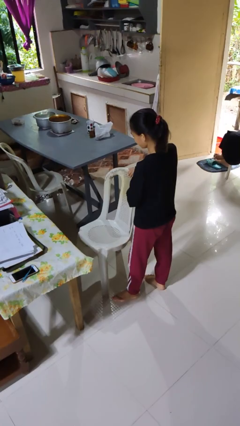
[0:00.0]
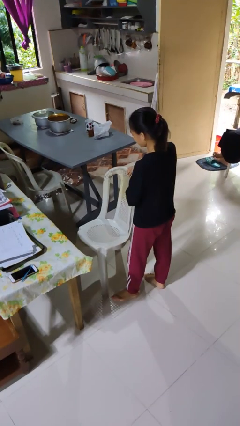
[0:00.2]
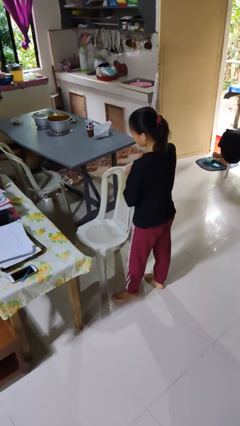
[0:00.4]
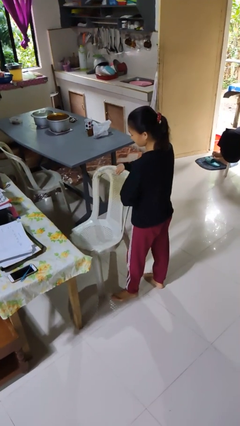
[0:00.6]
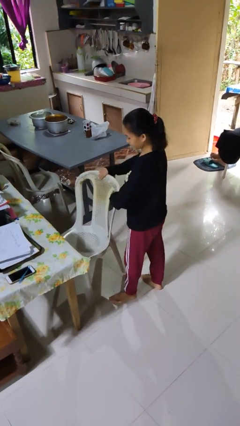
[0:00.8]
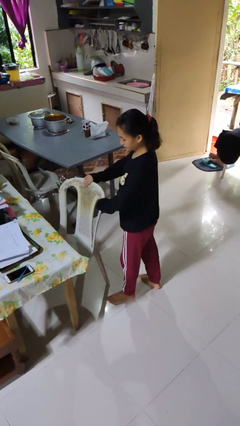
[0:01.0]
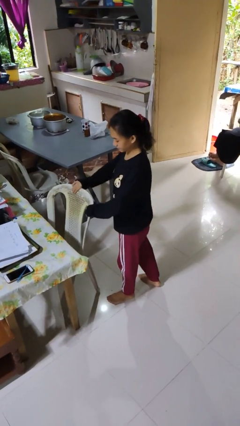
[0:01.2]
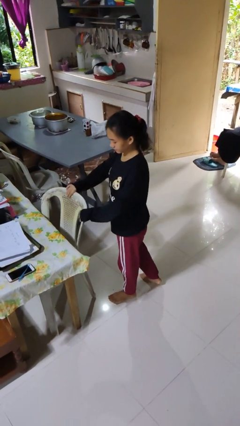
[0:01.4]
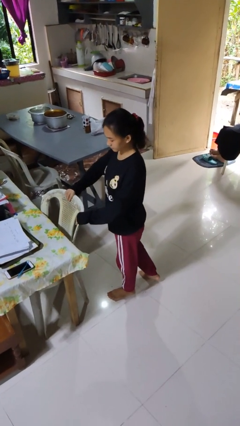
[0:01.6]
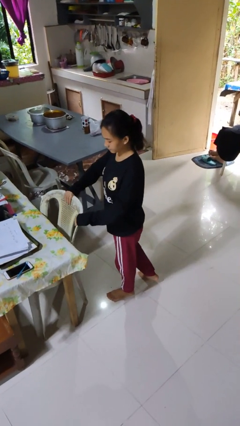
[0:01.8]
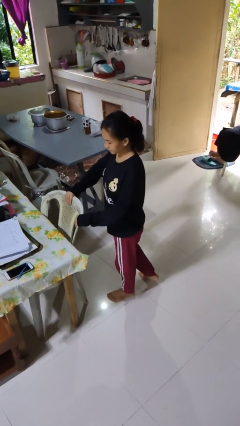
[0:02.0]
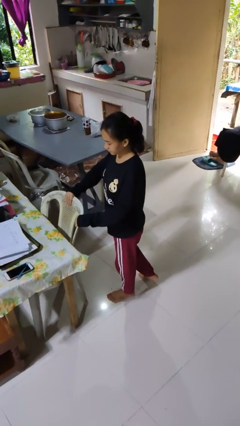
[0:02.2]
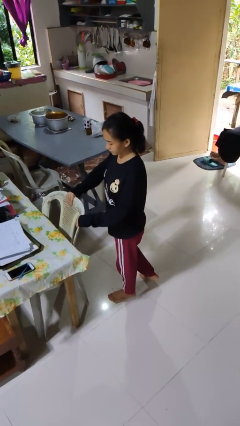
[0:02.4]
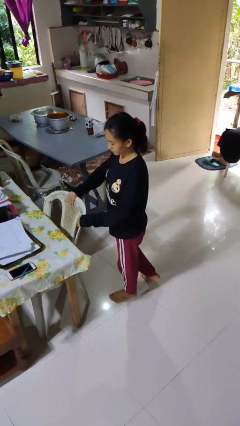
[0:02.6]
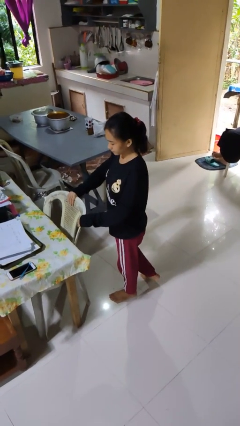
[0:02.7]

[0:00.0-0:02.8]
person pushes in chair

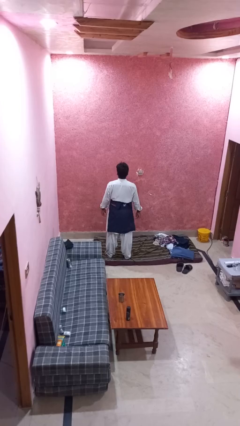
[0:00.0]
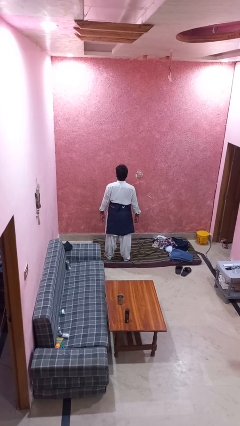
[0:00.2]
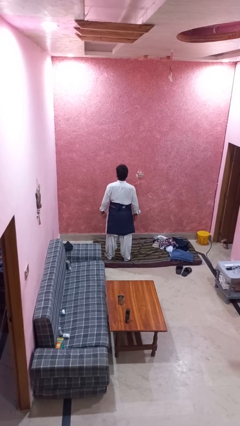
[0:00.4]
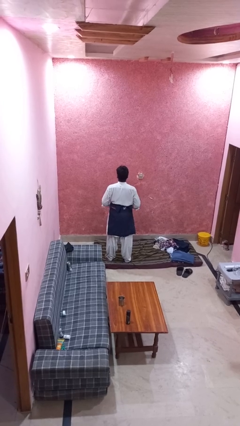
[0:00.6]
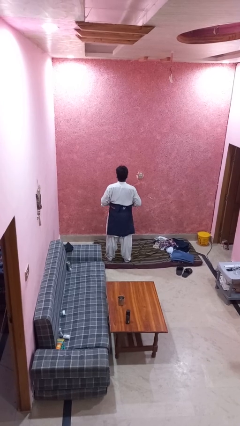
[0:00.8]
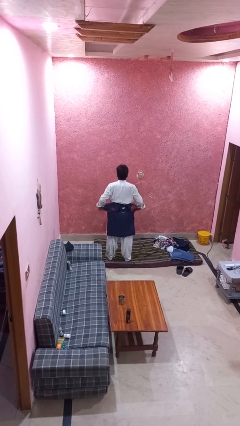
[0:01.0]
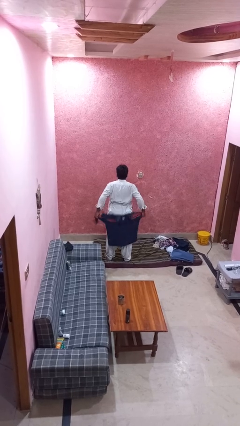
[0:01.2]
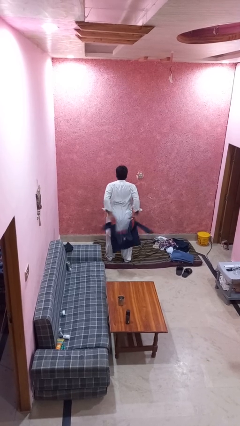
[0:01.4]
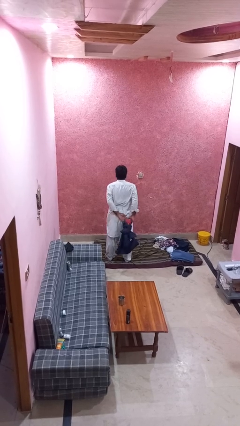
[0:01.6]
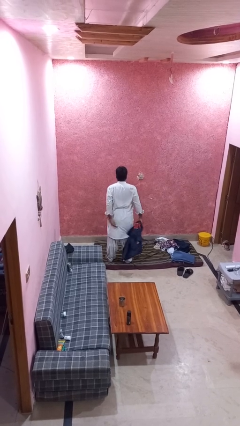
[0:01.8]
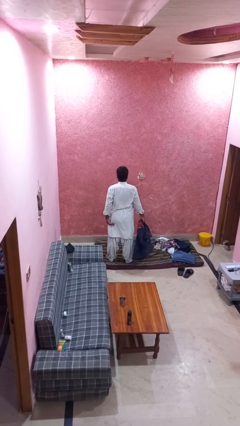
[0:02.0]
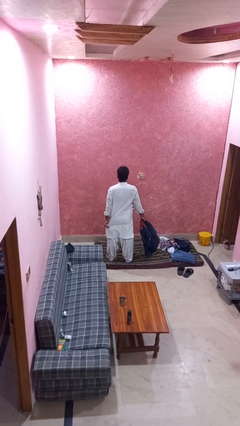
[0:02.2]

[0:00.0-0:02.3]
person unties jacket around waist

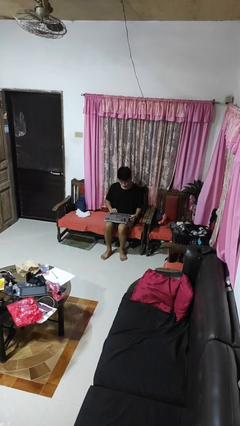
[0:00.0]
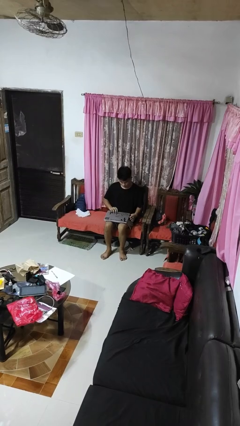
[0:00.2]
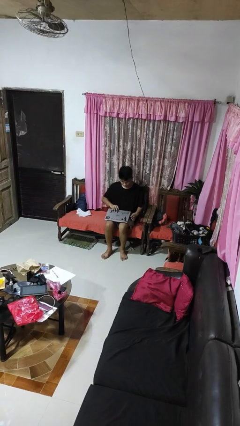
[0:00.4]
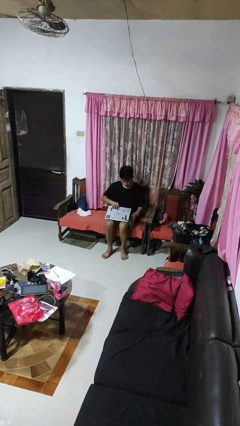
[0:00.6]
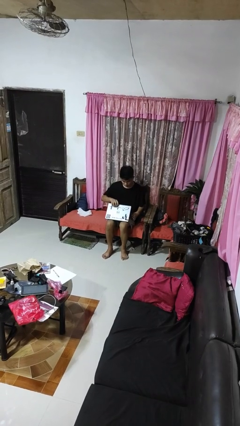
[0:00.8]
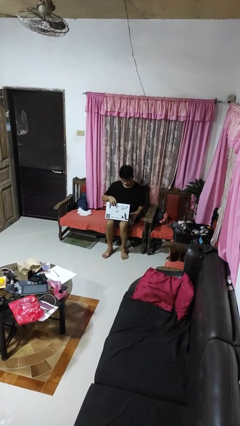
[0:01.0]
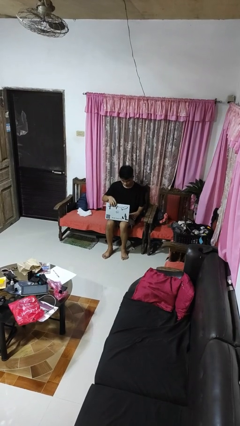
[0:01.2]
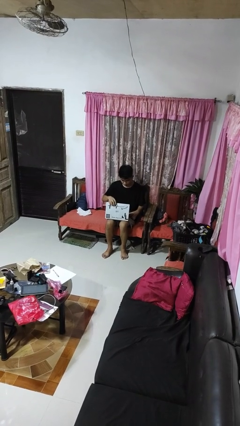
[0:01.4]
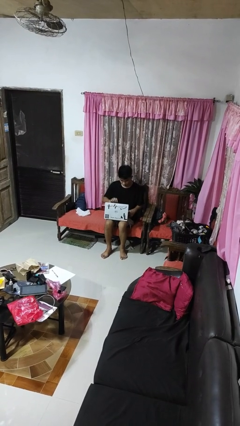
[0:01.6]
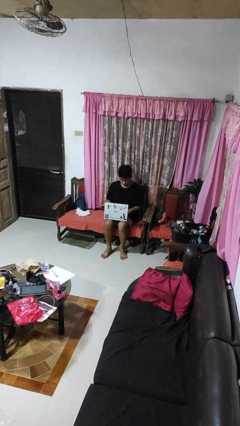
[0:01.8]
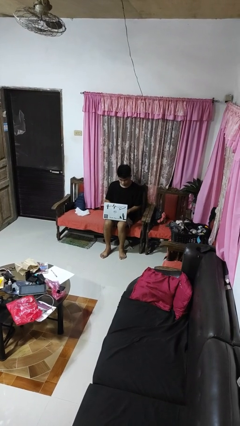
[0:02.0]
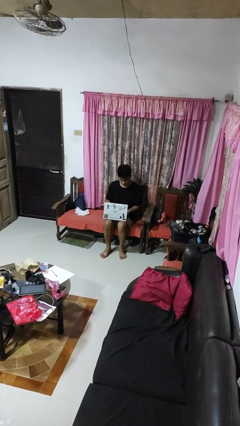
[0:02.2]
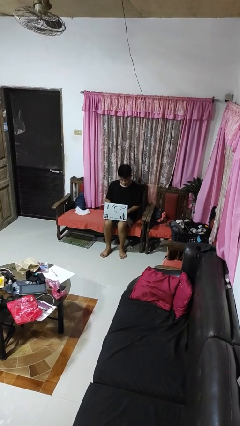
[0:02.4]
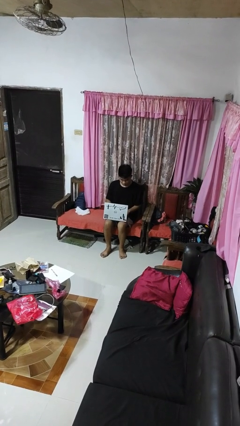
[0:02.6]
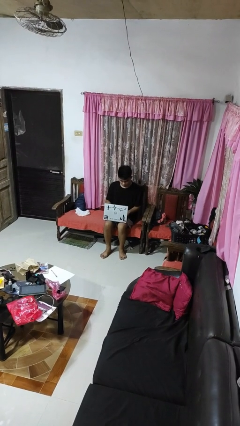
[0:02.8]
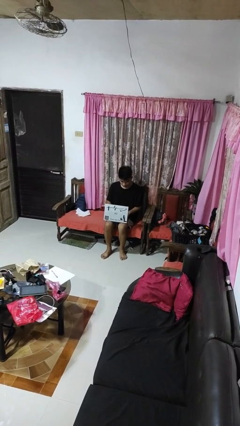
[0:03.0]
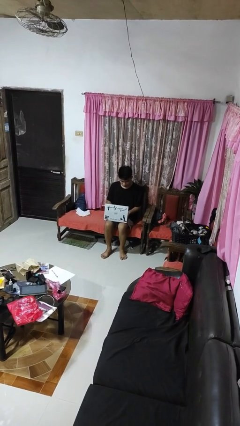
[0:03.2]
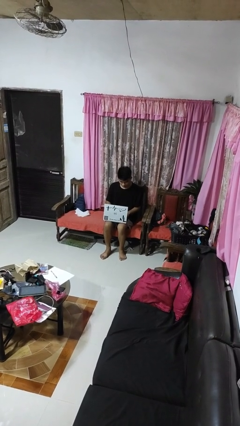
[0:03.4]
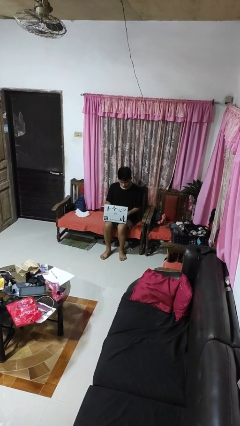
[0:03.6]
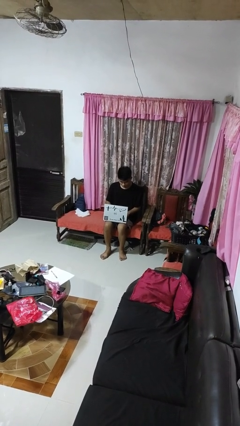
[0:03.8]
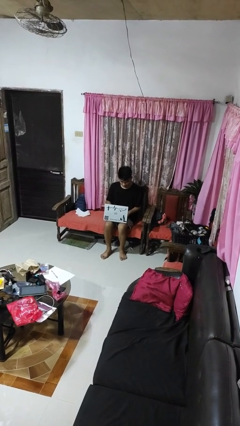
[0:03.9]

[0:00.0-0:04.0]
person opens laptop

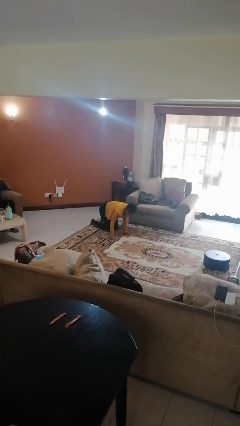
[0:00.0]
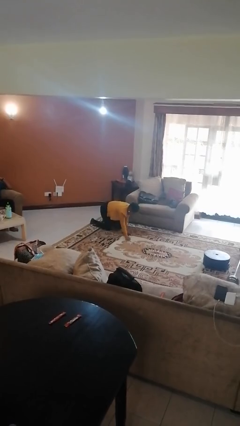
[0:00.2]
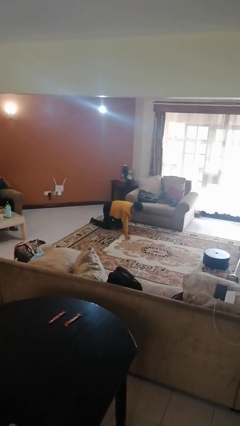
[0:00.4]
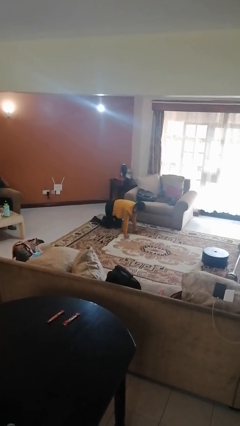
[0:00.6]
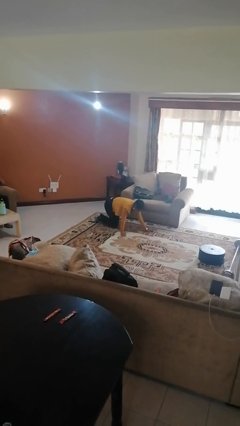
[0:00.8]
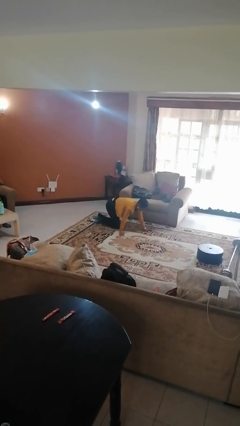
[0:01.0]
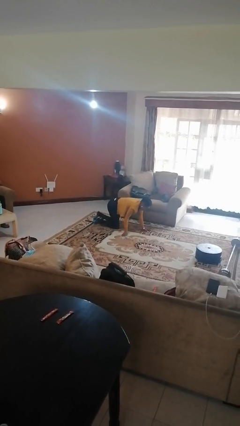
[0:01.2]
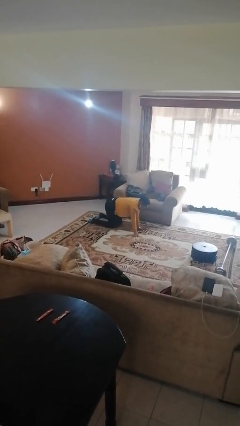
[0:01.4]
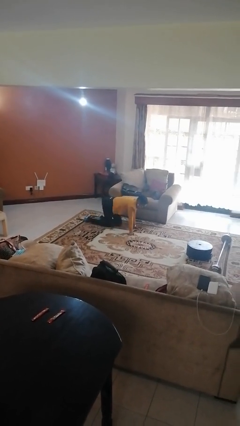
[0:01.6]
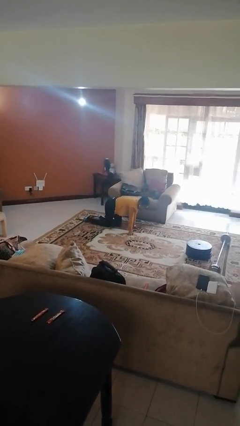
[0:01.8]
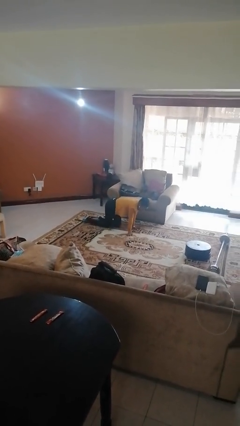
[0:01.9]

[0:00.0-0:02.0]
person crawls

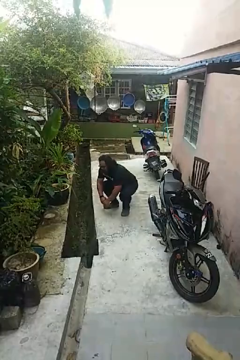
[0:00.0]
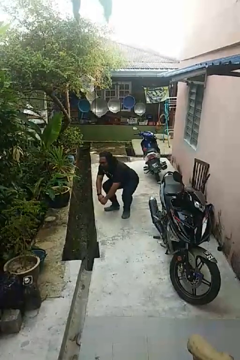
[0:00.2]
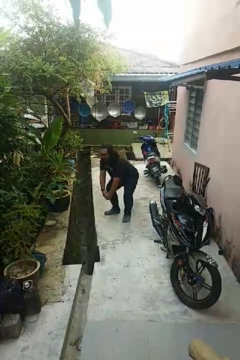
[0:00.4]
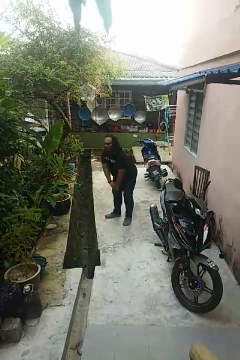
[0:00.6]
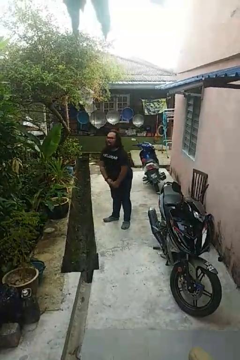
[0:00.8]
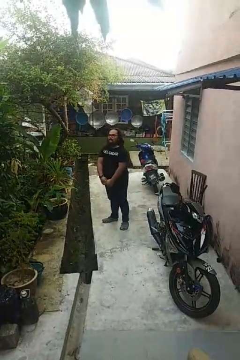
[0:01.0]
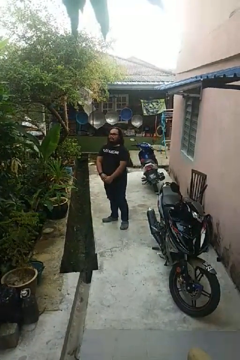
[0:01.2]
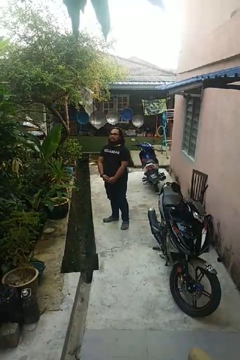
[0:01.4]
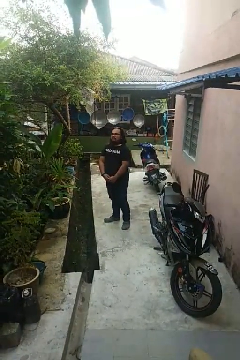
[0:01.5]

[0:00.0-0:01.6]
person stands up

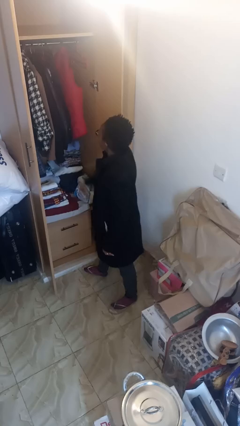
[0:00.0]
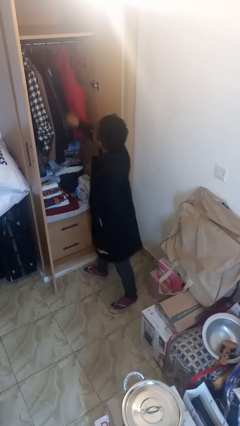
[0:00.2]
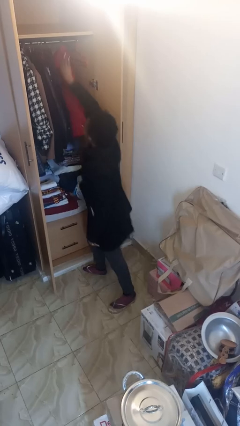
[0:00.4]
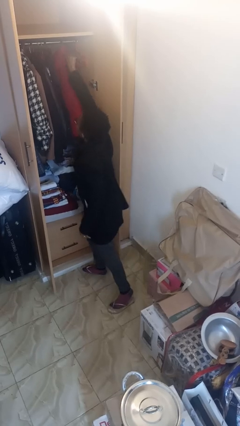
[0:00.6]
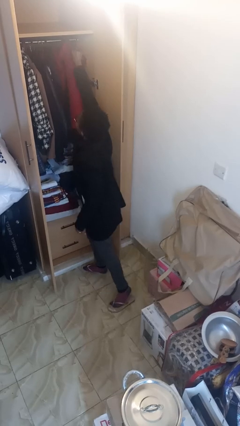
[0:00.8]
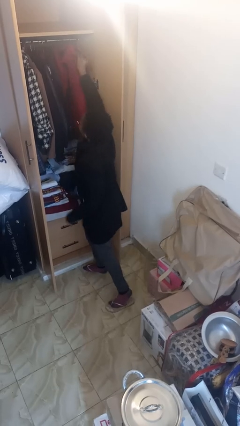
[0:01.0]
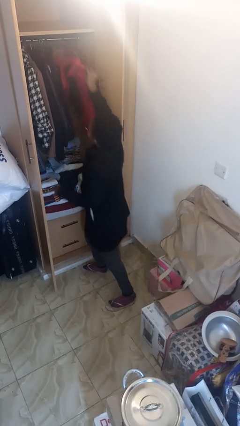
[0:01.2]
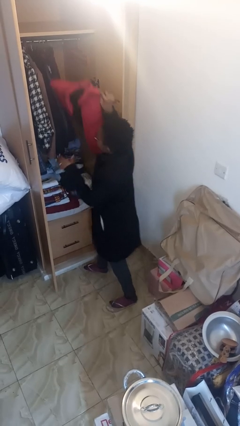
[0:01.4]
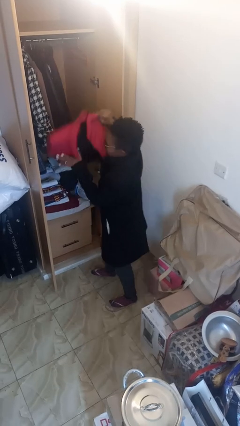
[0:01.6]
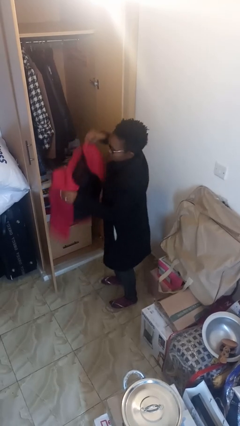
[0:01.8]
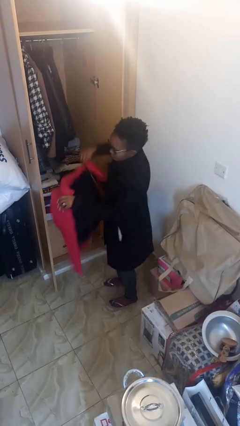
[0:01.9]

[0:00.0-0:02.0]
person takes clothes from closet

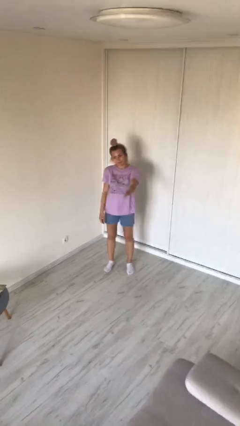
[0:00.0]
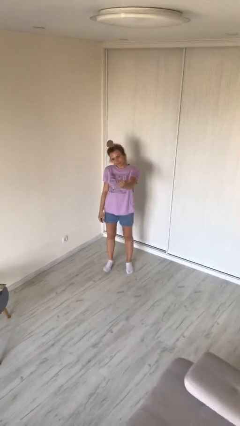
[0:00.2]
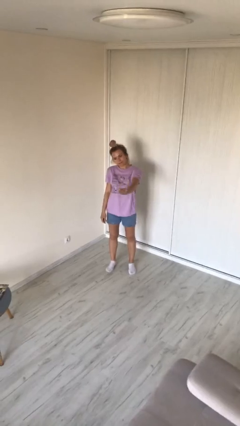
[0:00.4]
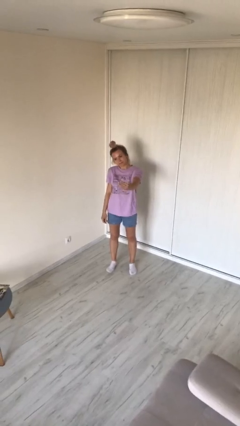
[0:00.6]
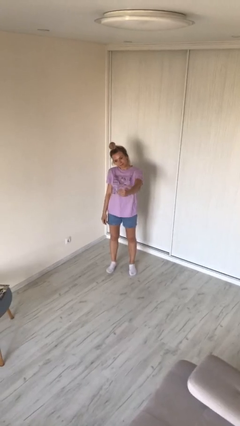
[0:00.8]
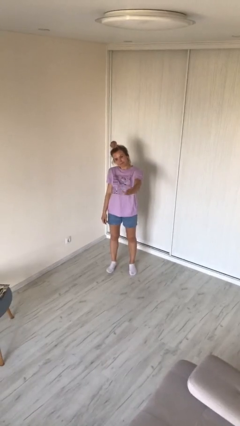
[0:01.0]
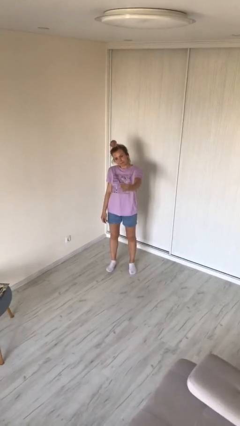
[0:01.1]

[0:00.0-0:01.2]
person gestures come here

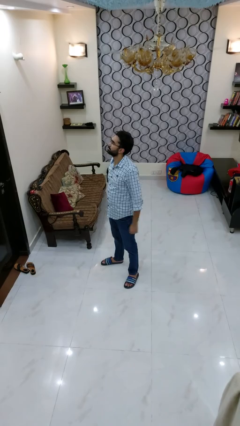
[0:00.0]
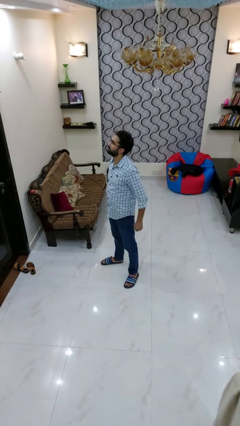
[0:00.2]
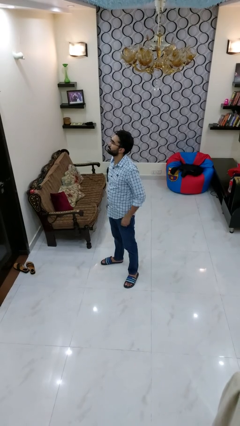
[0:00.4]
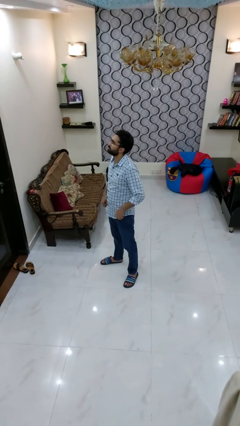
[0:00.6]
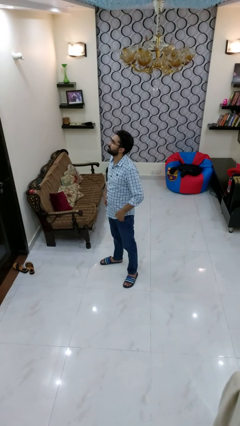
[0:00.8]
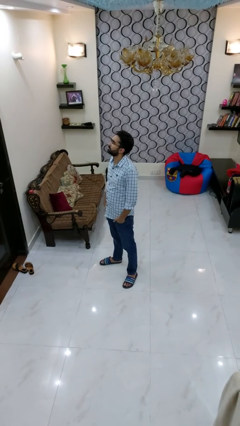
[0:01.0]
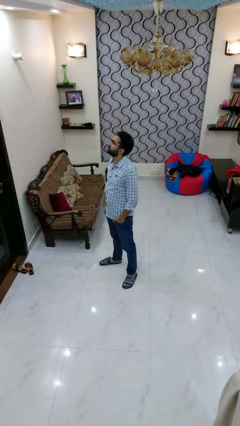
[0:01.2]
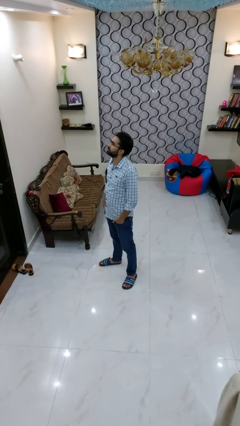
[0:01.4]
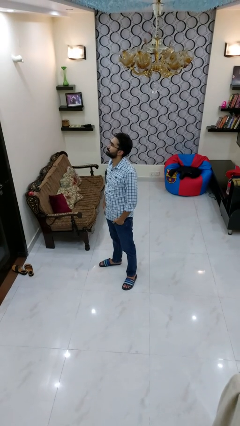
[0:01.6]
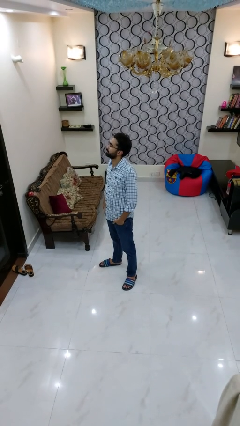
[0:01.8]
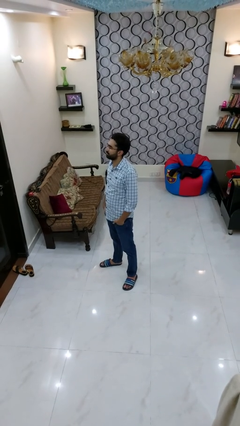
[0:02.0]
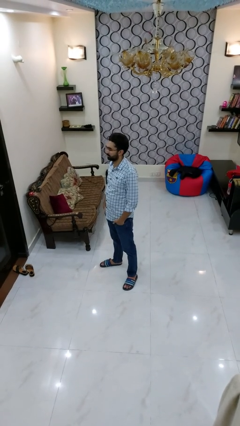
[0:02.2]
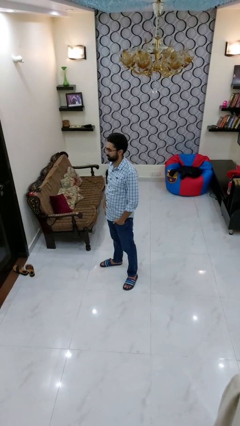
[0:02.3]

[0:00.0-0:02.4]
person puts hands in back pockets
